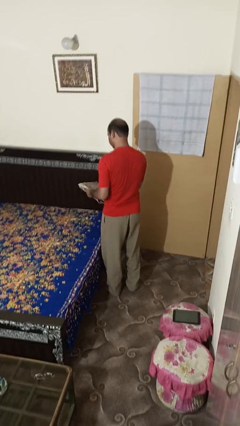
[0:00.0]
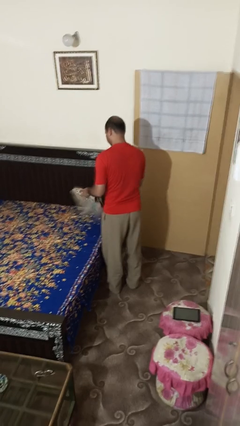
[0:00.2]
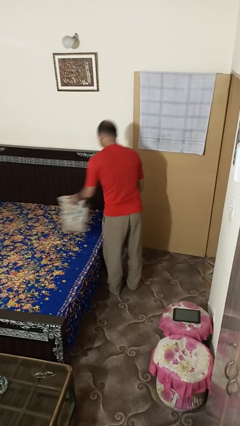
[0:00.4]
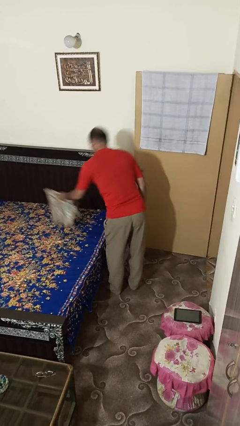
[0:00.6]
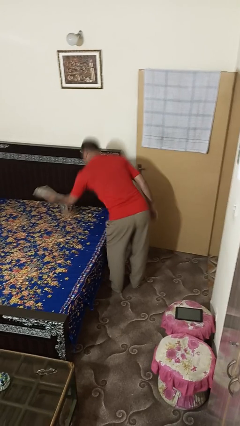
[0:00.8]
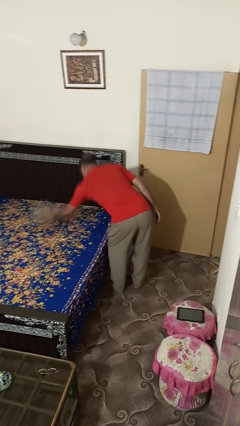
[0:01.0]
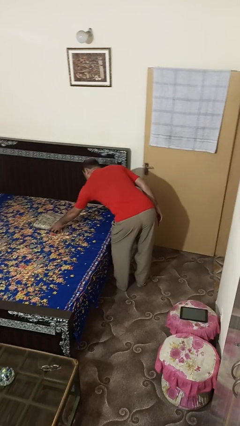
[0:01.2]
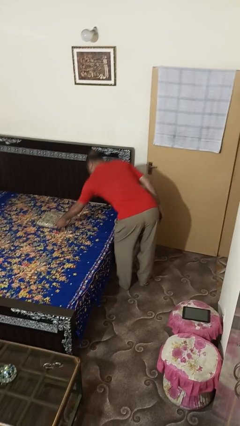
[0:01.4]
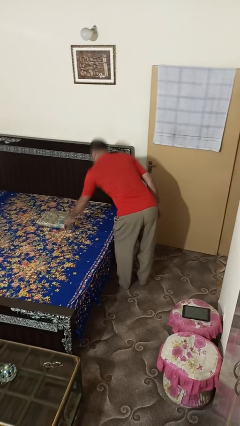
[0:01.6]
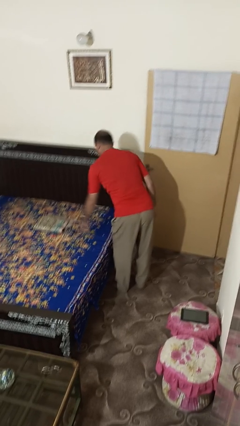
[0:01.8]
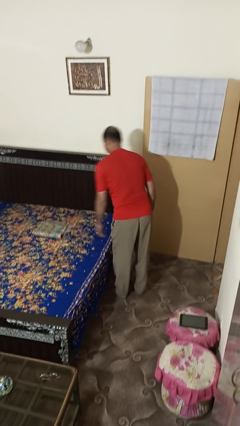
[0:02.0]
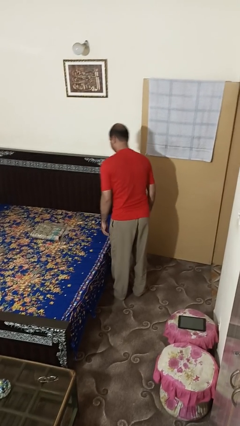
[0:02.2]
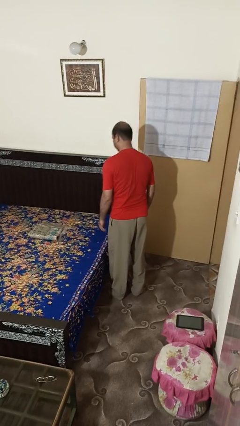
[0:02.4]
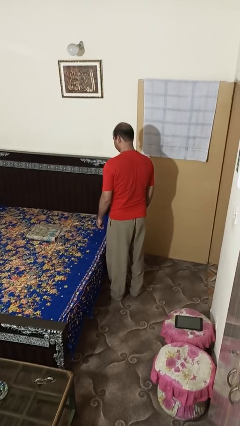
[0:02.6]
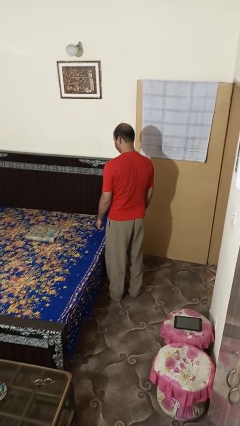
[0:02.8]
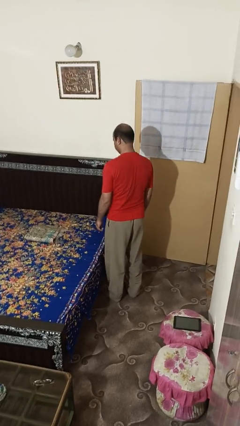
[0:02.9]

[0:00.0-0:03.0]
person puts down object on bed

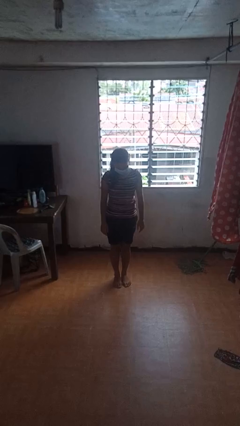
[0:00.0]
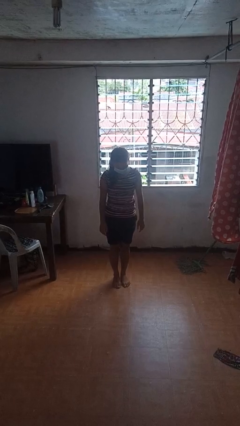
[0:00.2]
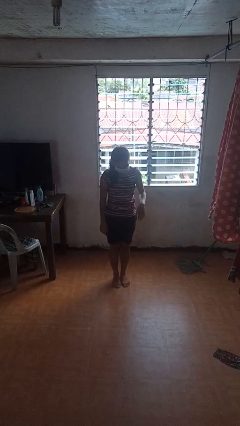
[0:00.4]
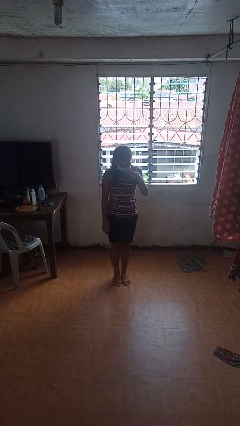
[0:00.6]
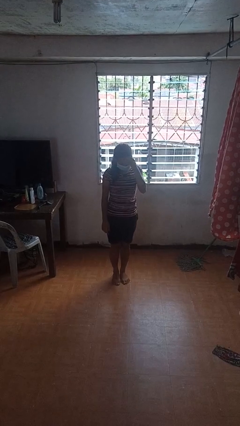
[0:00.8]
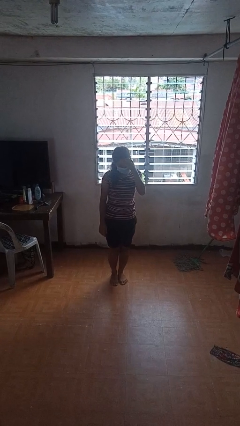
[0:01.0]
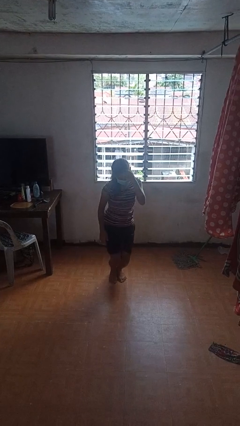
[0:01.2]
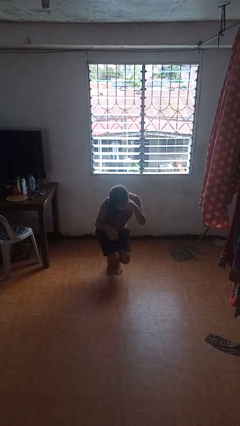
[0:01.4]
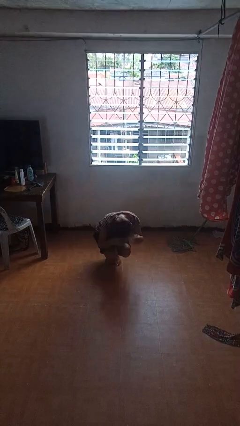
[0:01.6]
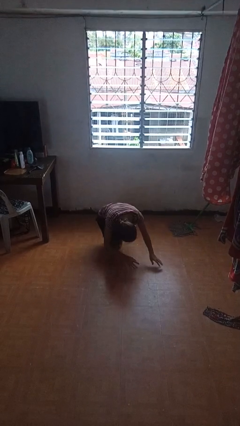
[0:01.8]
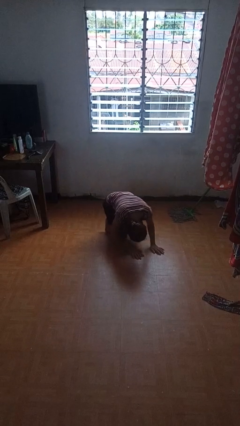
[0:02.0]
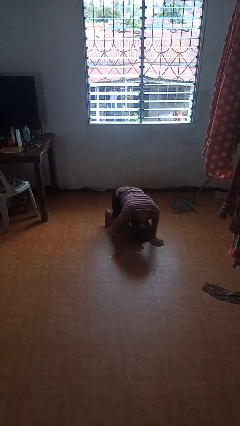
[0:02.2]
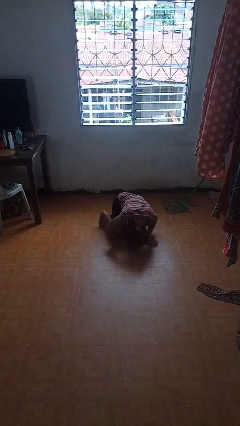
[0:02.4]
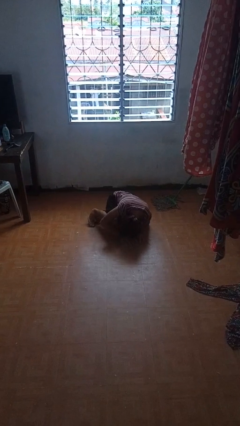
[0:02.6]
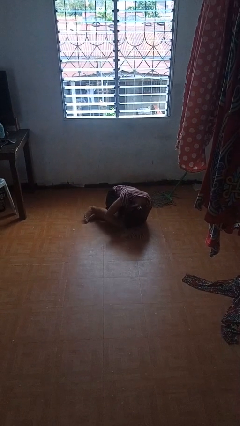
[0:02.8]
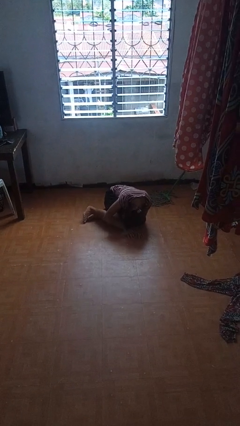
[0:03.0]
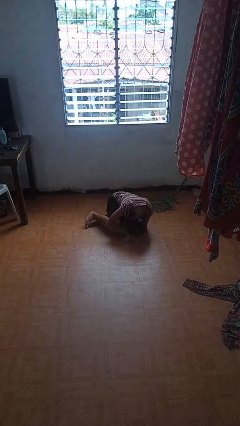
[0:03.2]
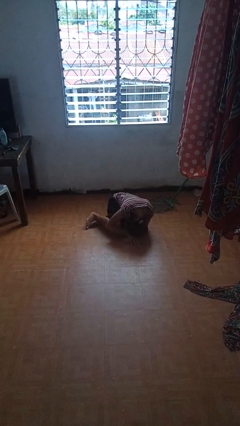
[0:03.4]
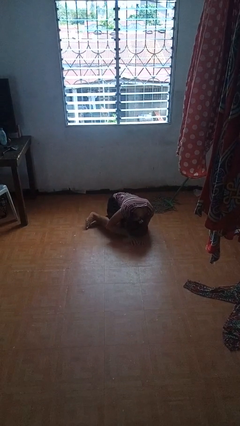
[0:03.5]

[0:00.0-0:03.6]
person falls while standing

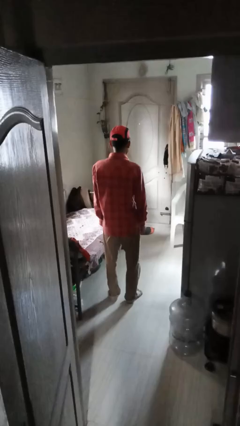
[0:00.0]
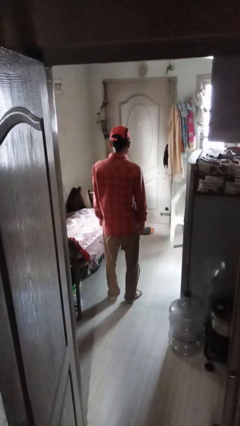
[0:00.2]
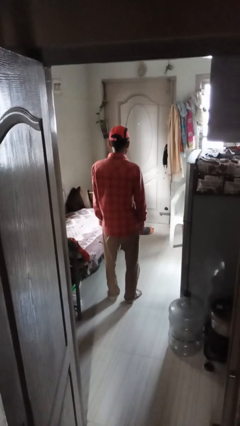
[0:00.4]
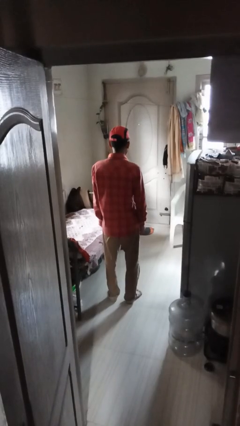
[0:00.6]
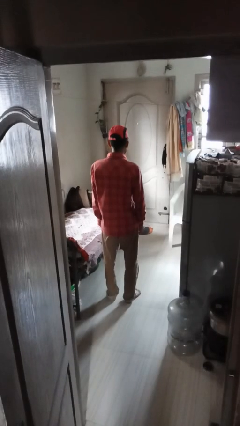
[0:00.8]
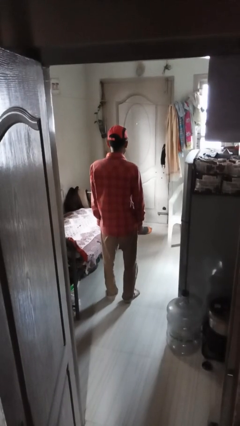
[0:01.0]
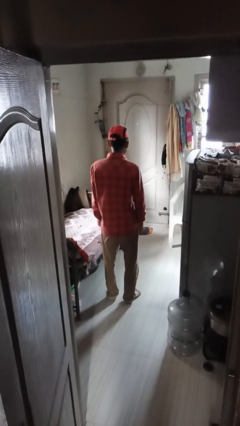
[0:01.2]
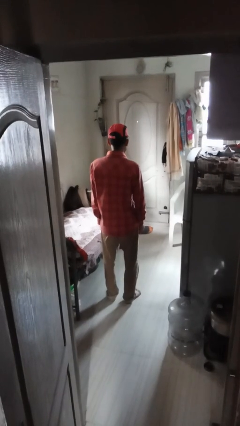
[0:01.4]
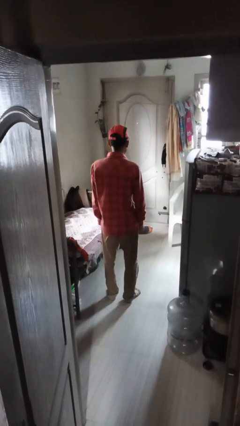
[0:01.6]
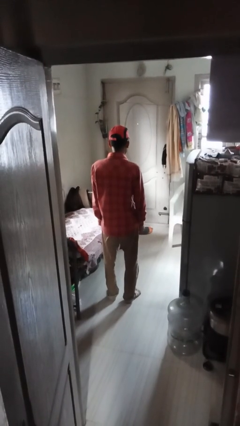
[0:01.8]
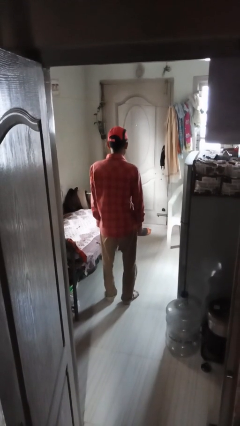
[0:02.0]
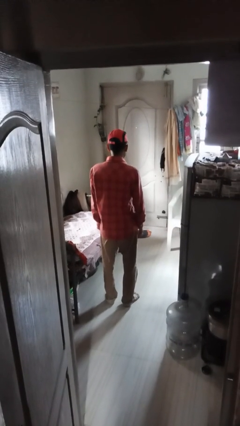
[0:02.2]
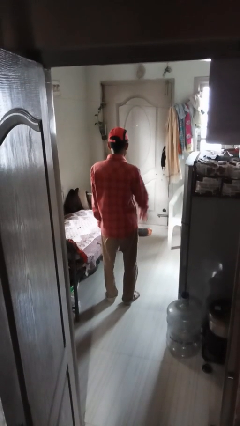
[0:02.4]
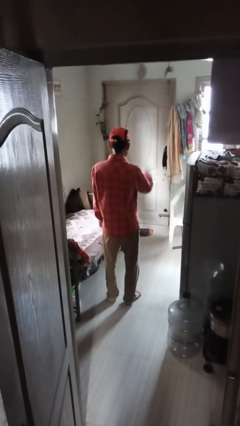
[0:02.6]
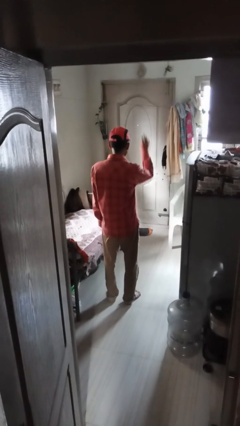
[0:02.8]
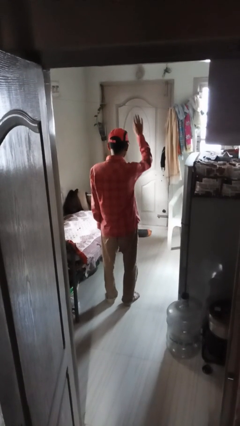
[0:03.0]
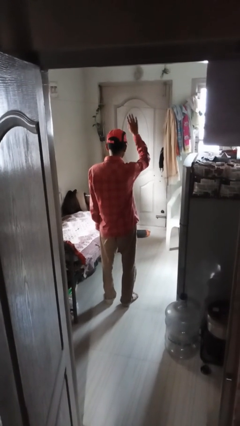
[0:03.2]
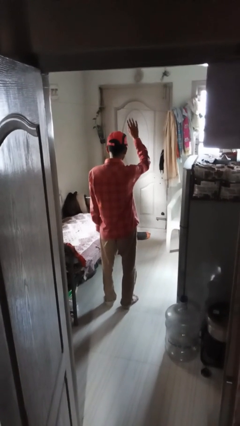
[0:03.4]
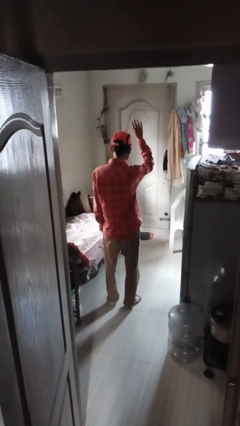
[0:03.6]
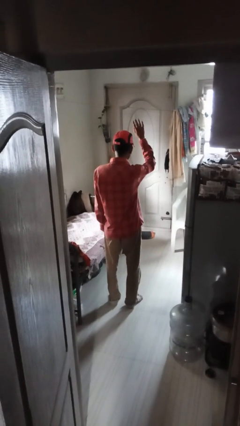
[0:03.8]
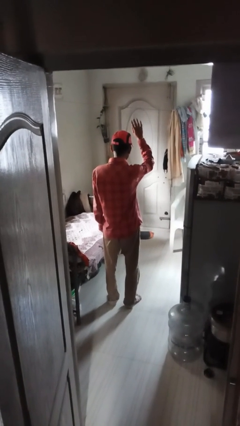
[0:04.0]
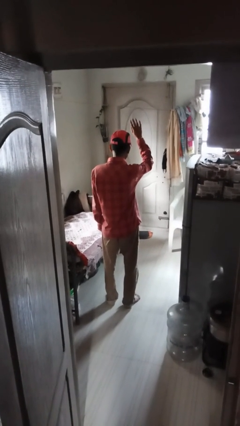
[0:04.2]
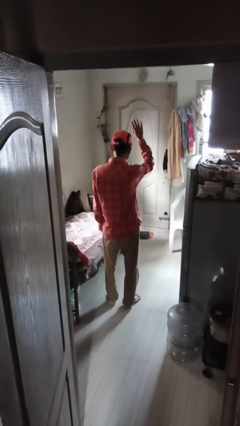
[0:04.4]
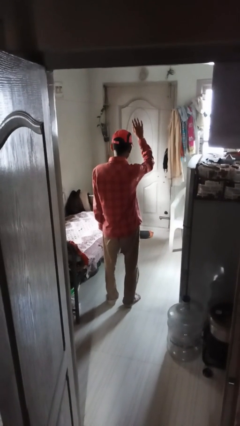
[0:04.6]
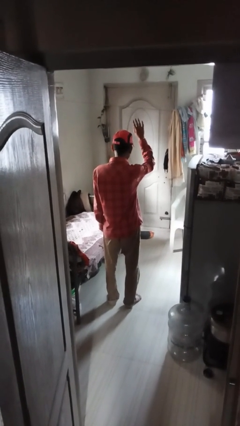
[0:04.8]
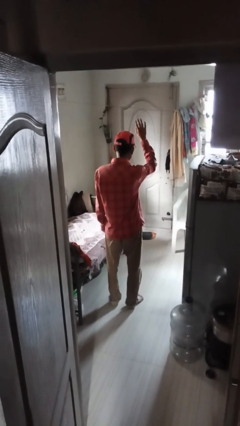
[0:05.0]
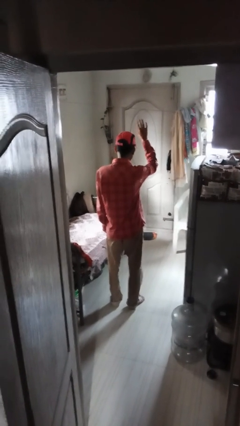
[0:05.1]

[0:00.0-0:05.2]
person gestures raise hand

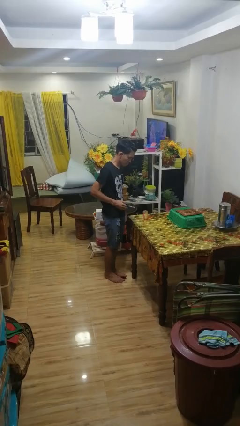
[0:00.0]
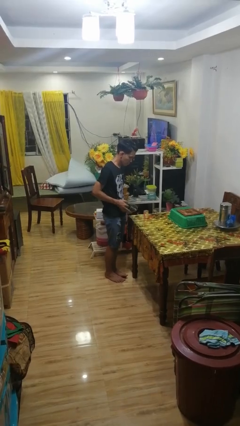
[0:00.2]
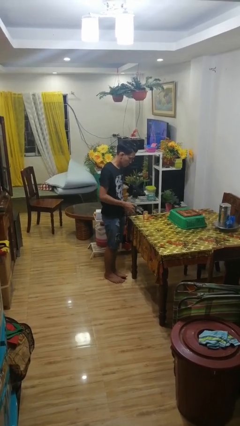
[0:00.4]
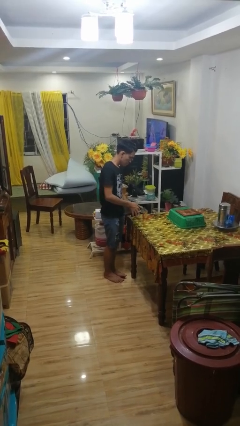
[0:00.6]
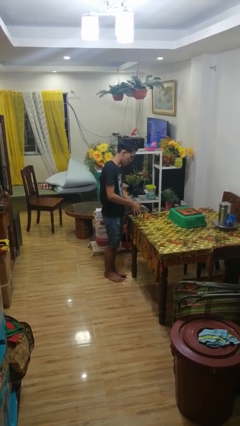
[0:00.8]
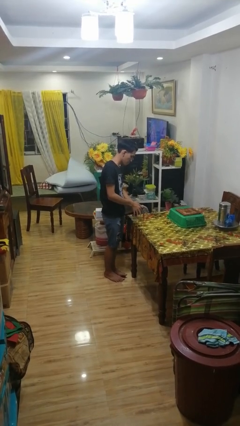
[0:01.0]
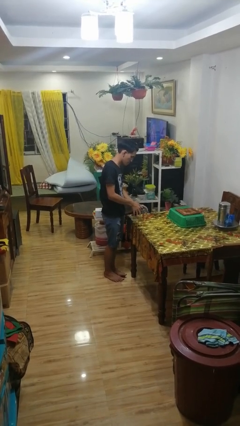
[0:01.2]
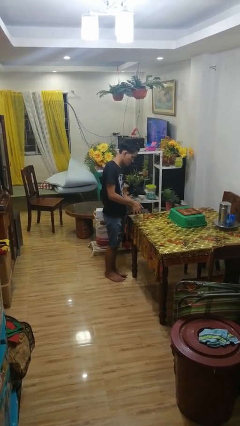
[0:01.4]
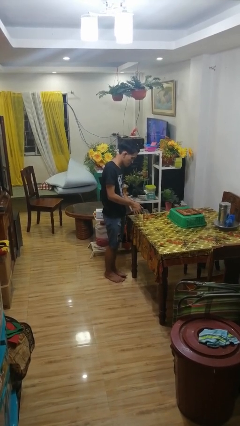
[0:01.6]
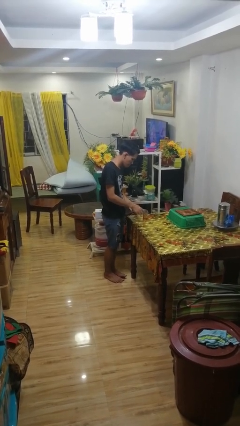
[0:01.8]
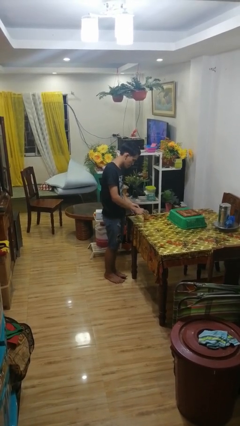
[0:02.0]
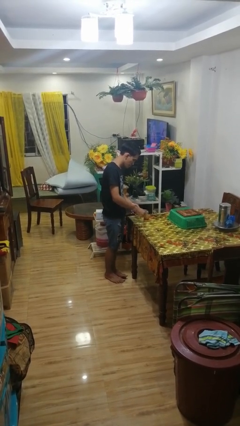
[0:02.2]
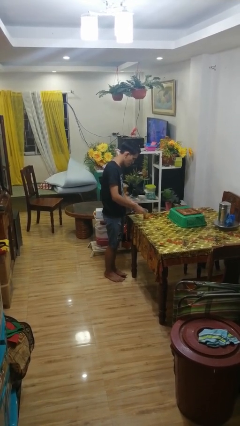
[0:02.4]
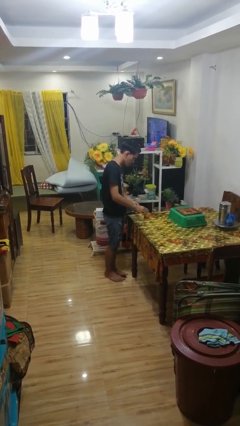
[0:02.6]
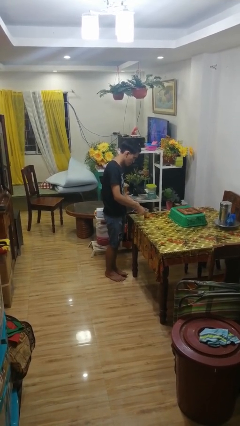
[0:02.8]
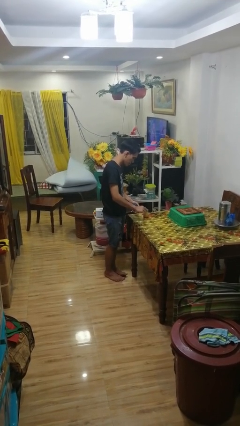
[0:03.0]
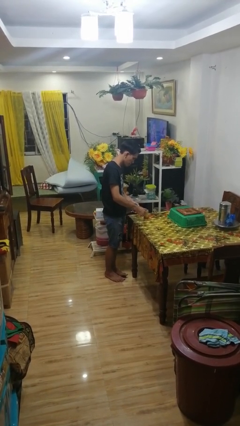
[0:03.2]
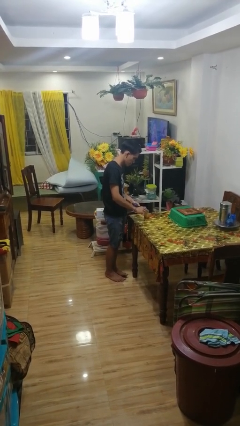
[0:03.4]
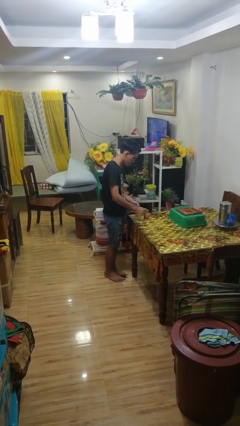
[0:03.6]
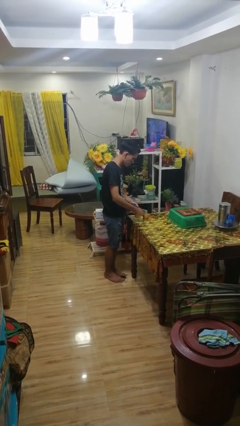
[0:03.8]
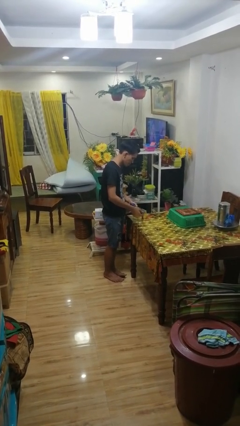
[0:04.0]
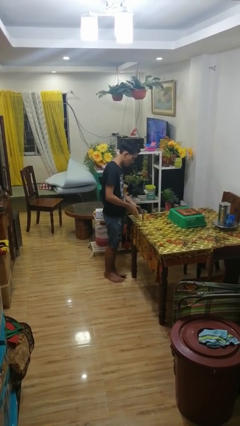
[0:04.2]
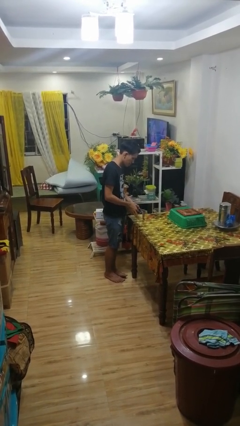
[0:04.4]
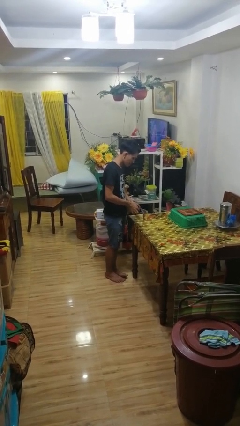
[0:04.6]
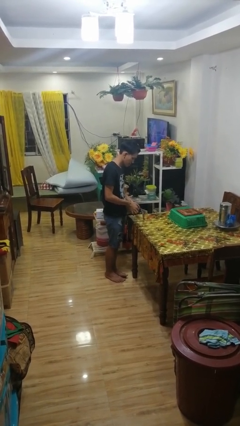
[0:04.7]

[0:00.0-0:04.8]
person opens can with can opener

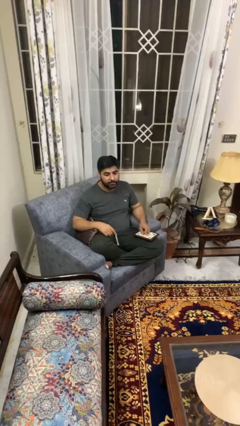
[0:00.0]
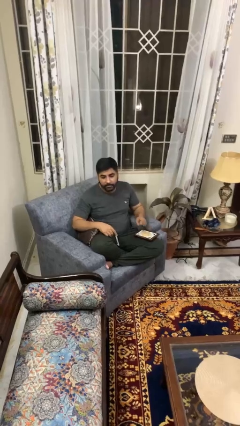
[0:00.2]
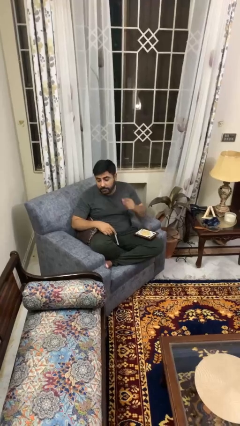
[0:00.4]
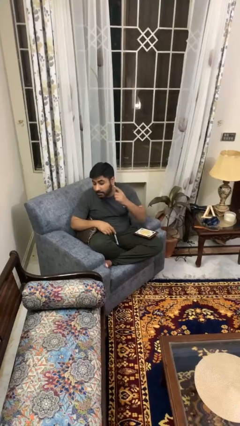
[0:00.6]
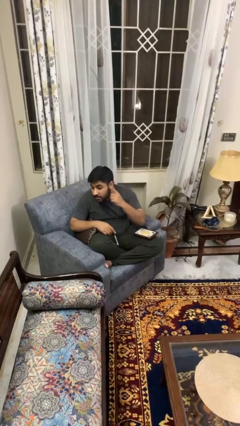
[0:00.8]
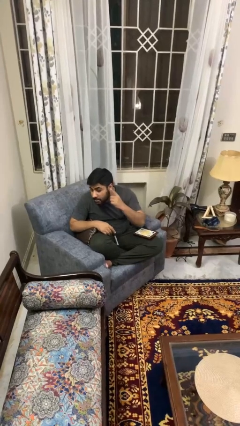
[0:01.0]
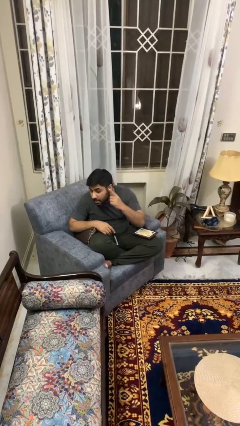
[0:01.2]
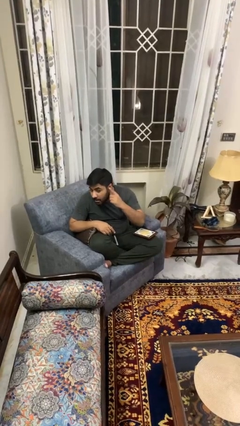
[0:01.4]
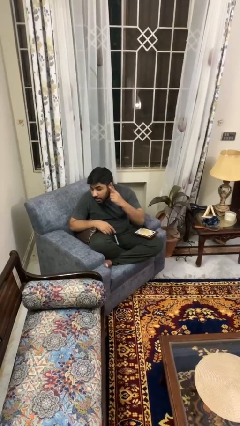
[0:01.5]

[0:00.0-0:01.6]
person gestures listen closely
